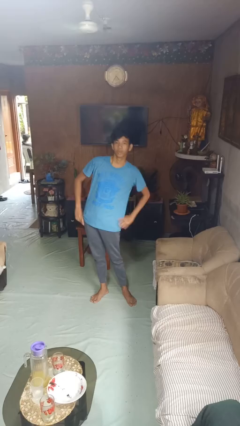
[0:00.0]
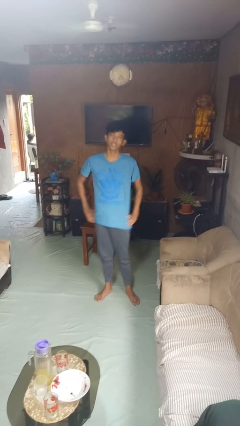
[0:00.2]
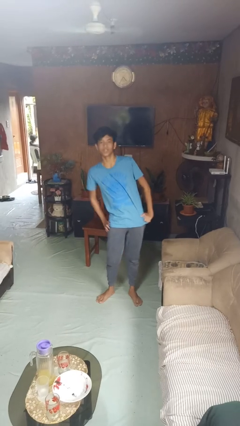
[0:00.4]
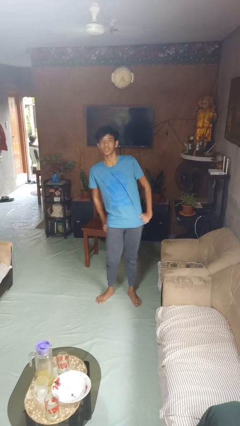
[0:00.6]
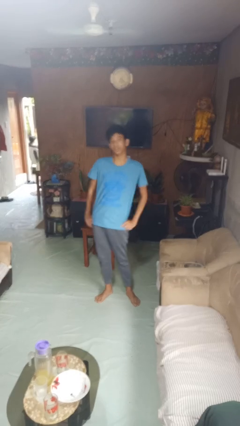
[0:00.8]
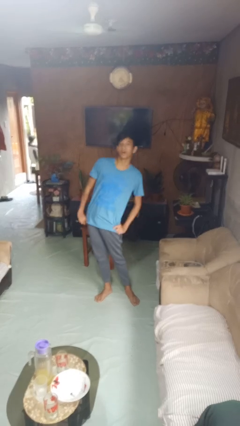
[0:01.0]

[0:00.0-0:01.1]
person dances in place

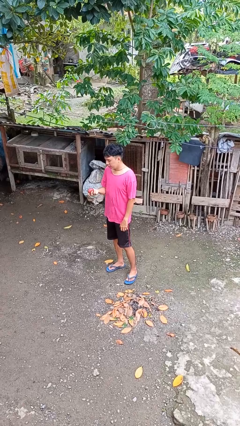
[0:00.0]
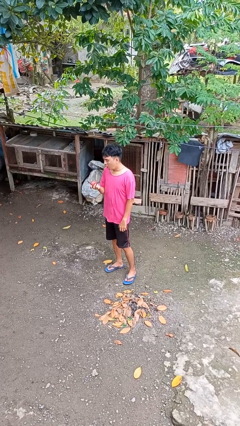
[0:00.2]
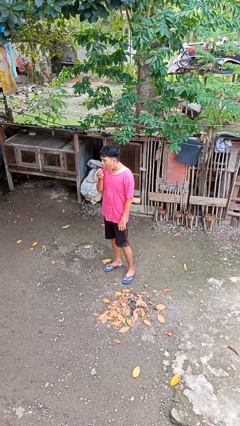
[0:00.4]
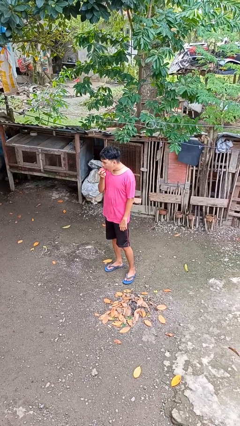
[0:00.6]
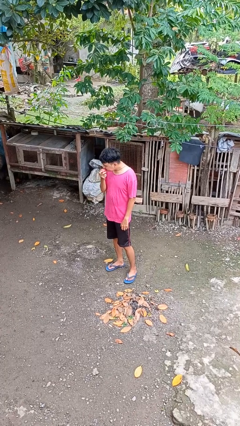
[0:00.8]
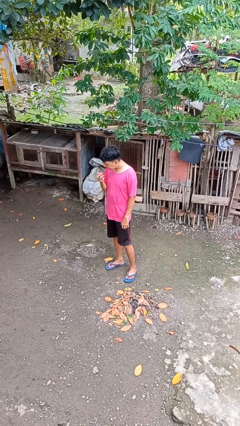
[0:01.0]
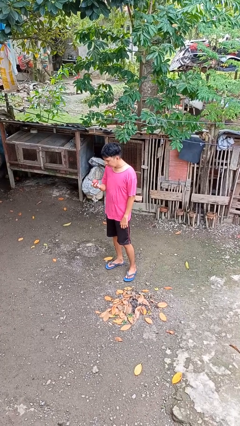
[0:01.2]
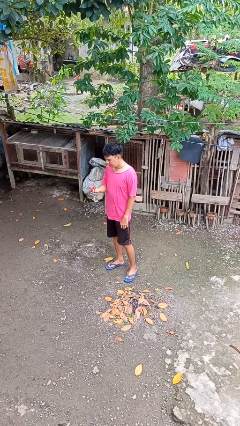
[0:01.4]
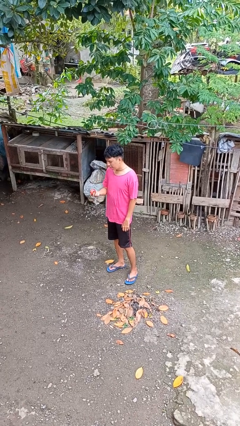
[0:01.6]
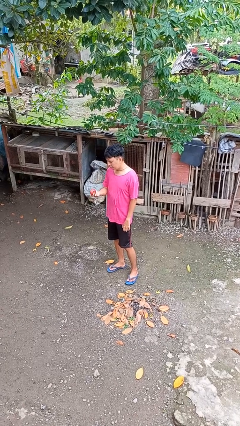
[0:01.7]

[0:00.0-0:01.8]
person eats apple

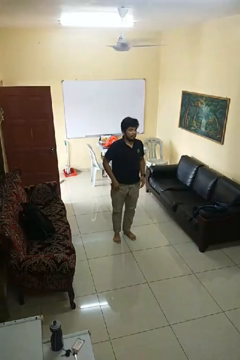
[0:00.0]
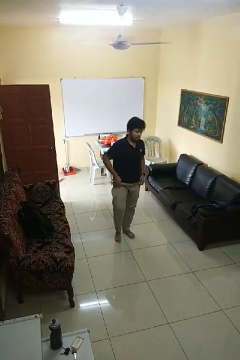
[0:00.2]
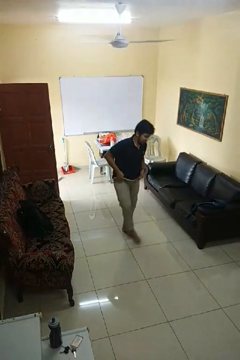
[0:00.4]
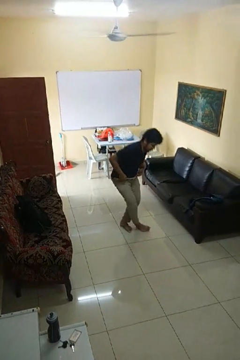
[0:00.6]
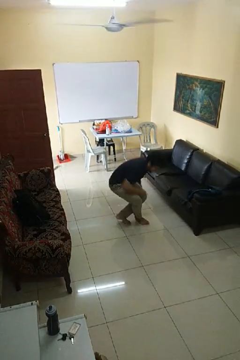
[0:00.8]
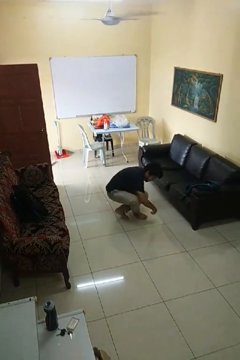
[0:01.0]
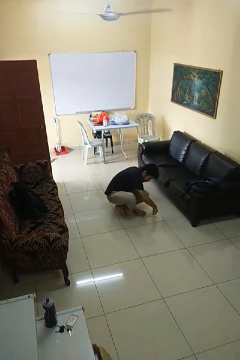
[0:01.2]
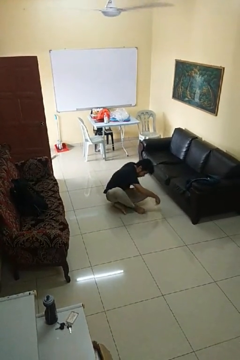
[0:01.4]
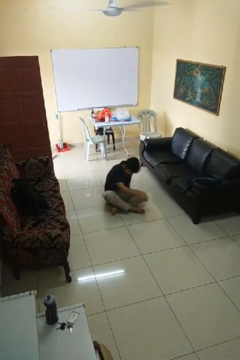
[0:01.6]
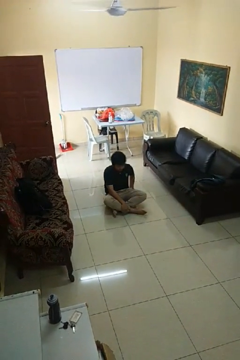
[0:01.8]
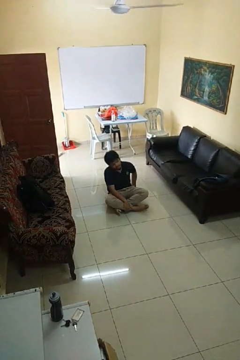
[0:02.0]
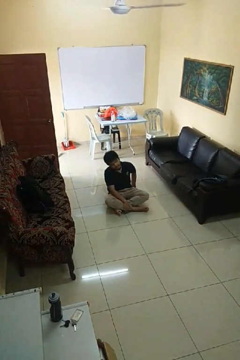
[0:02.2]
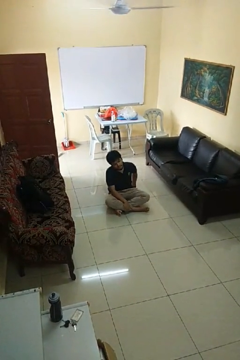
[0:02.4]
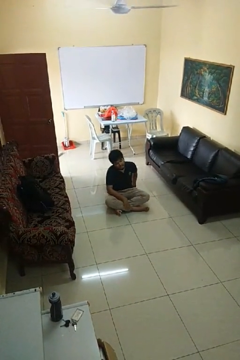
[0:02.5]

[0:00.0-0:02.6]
person sits crisscross

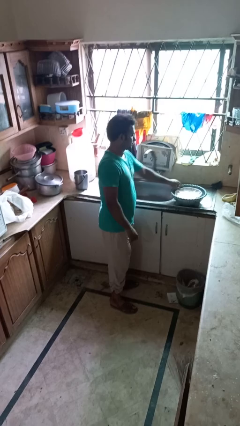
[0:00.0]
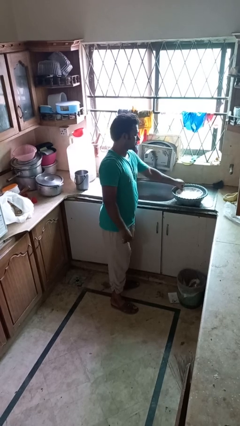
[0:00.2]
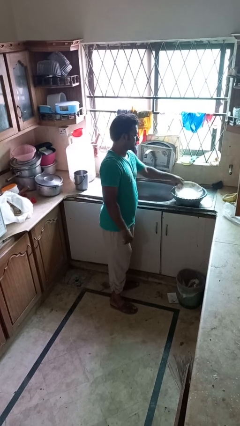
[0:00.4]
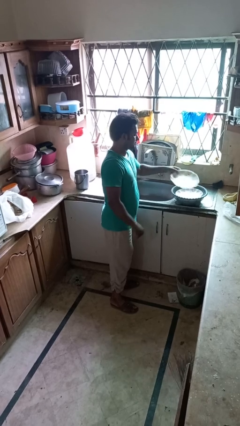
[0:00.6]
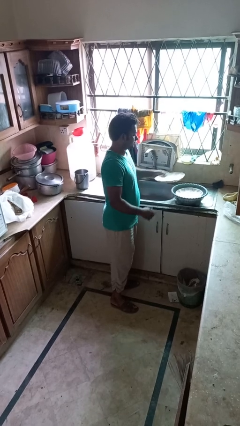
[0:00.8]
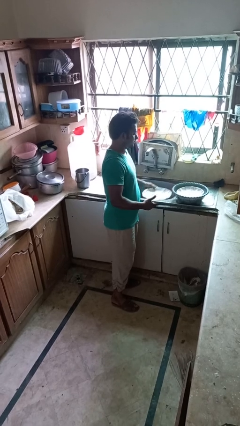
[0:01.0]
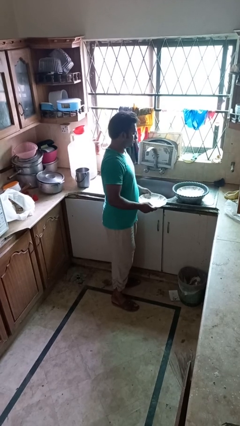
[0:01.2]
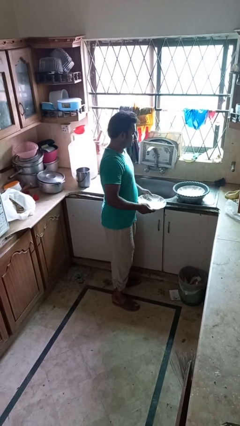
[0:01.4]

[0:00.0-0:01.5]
person unloads dishwasher

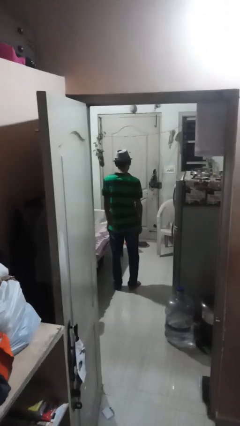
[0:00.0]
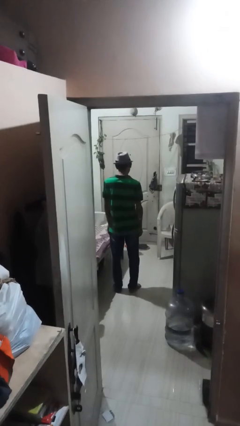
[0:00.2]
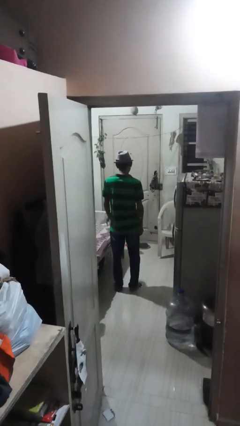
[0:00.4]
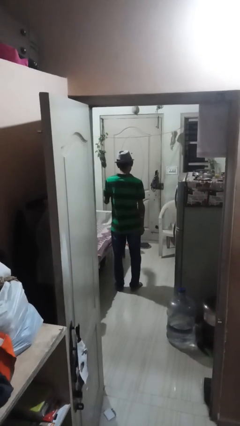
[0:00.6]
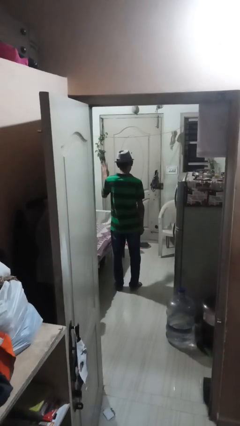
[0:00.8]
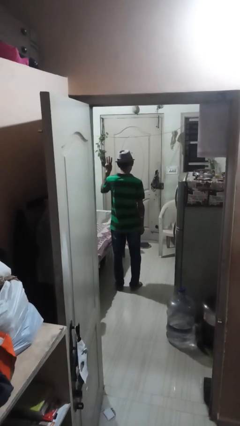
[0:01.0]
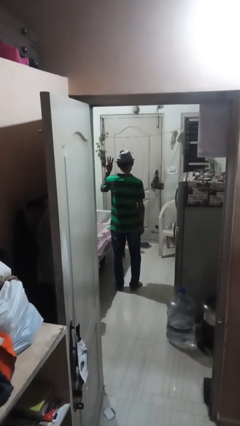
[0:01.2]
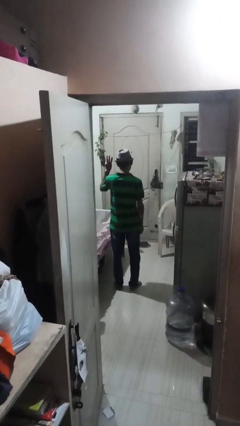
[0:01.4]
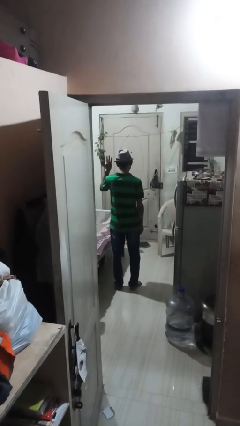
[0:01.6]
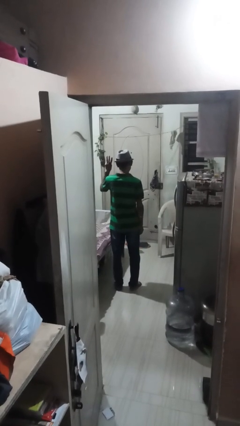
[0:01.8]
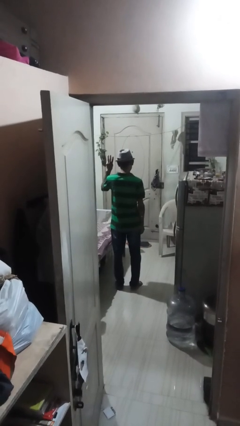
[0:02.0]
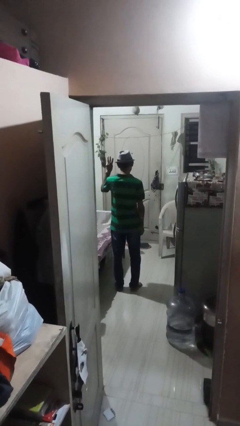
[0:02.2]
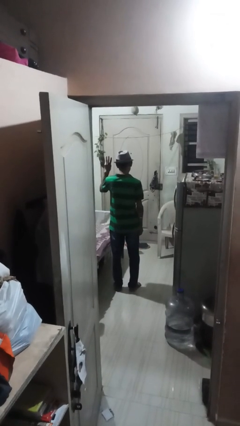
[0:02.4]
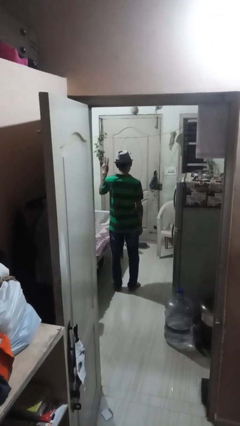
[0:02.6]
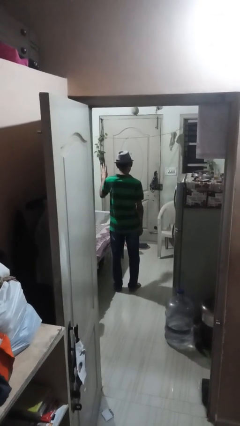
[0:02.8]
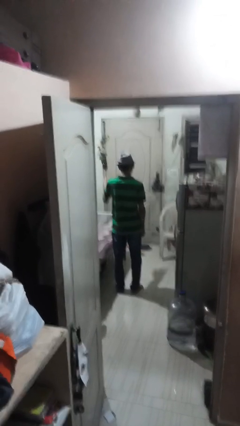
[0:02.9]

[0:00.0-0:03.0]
person gestures number three

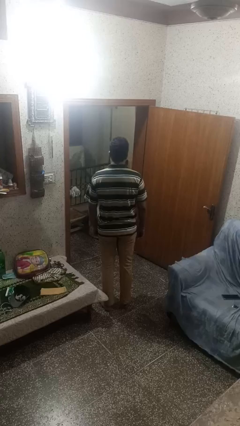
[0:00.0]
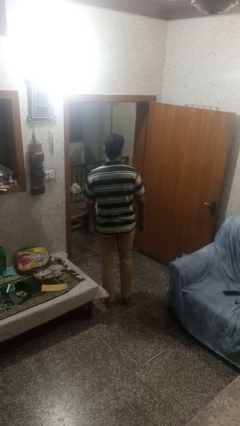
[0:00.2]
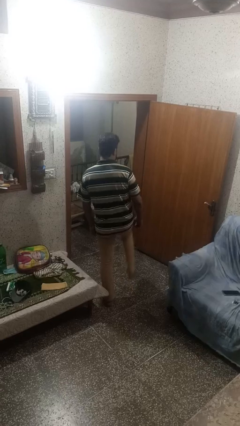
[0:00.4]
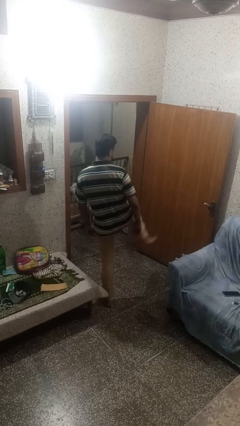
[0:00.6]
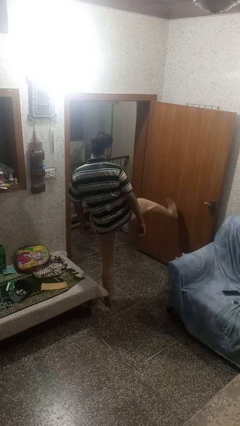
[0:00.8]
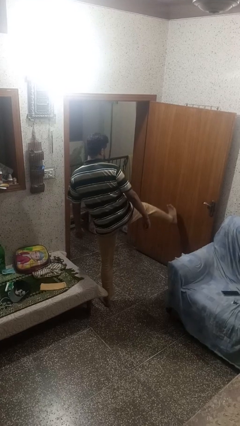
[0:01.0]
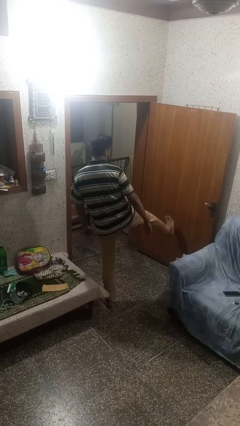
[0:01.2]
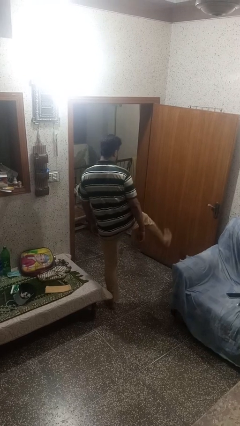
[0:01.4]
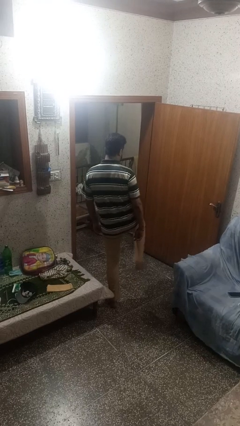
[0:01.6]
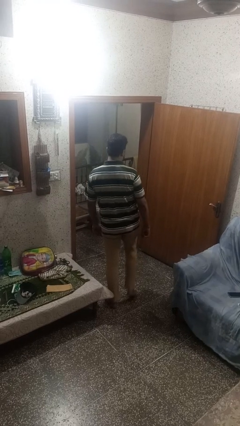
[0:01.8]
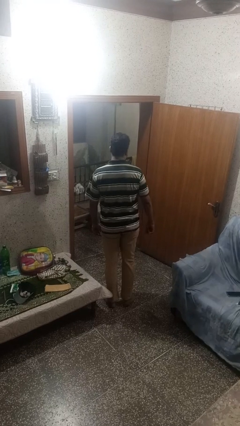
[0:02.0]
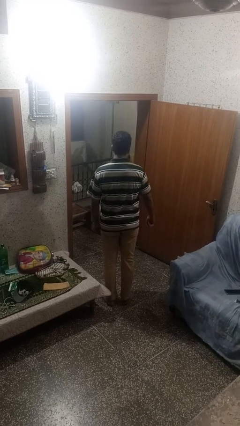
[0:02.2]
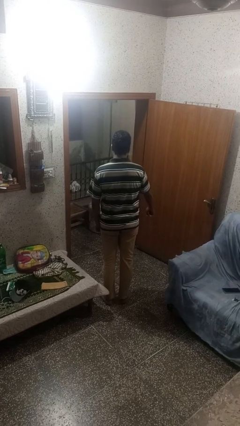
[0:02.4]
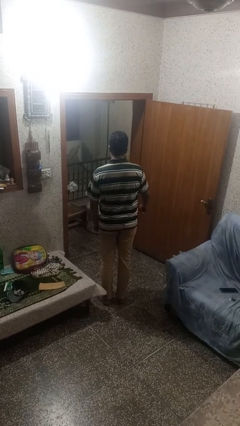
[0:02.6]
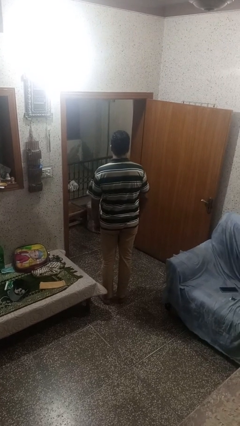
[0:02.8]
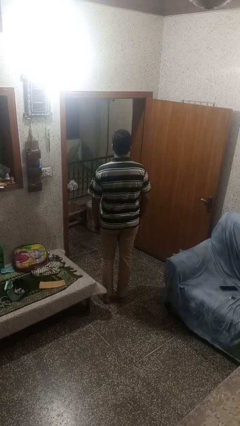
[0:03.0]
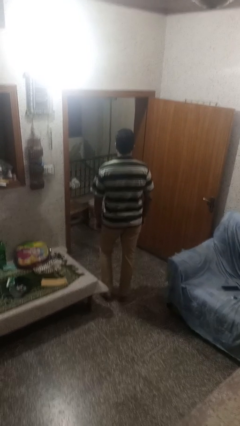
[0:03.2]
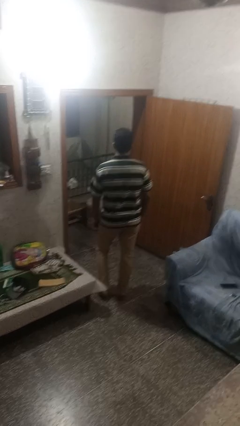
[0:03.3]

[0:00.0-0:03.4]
person karate kicks

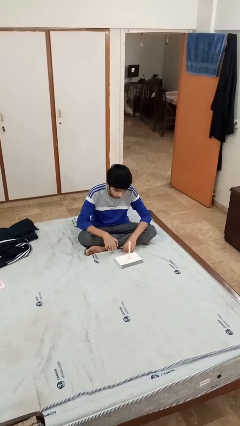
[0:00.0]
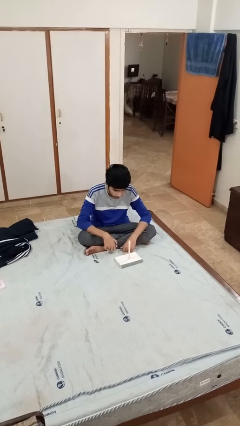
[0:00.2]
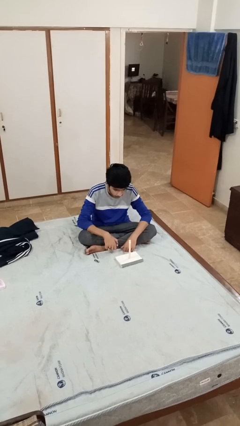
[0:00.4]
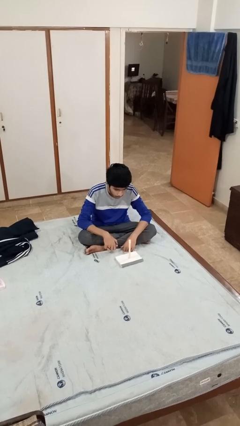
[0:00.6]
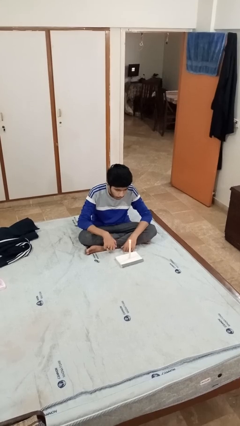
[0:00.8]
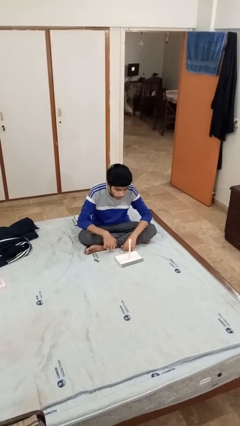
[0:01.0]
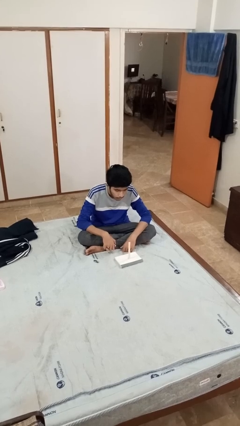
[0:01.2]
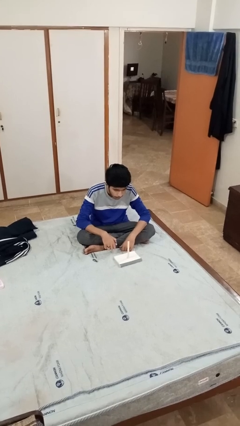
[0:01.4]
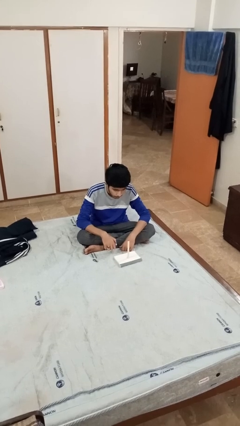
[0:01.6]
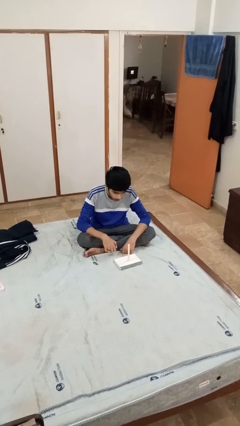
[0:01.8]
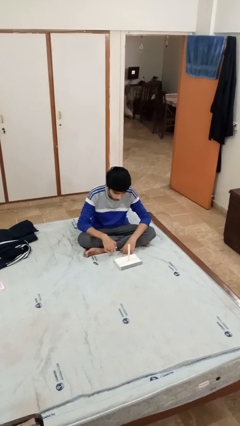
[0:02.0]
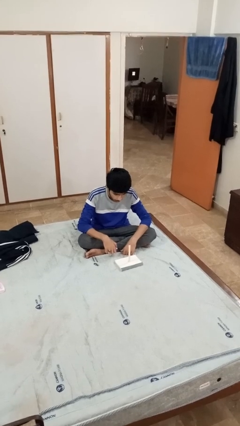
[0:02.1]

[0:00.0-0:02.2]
person extinguishes candle

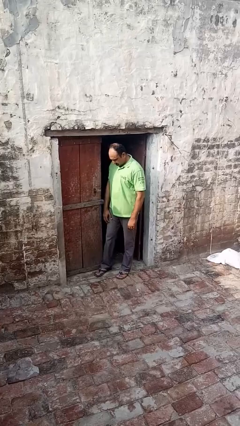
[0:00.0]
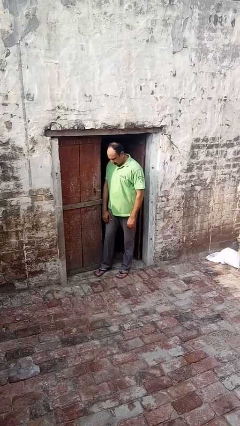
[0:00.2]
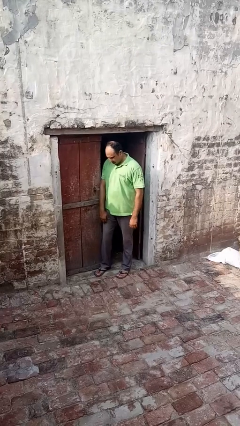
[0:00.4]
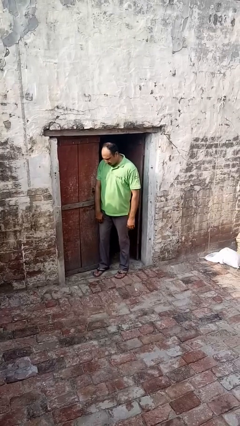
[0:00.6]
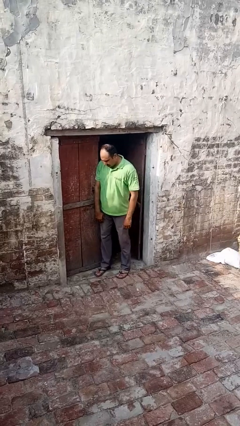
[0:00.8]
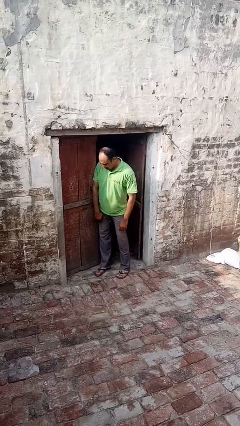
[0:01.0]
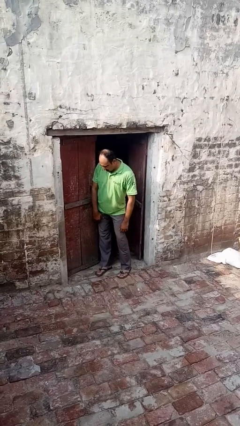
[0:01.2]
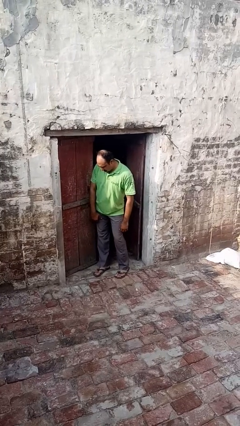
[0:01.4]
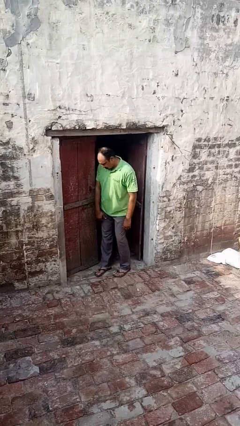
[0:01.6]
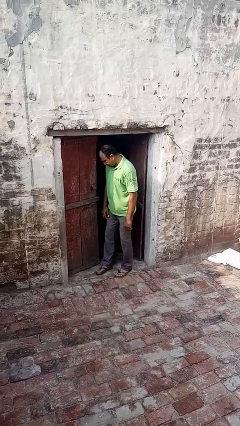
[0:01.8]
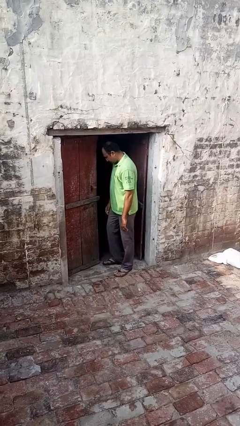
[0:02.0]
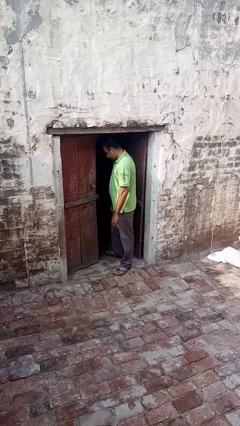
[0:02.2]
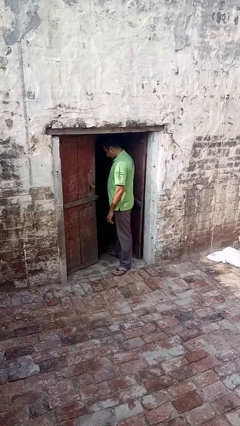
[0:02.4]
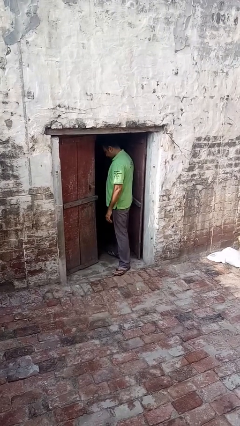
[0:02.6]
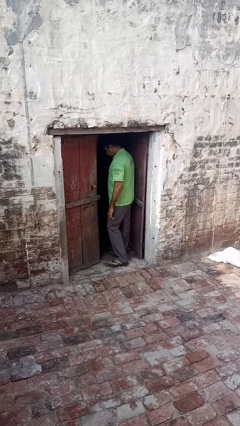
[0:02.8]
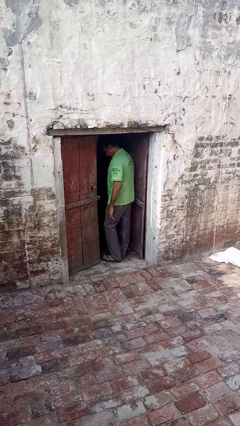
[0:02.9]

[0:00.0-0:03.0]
person opens facility door
